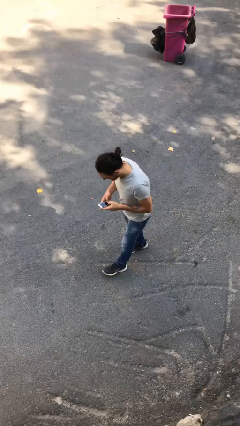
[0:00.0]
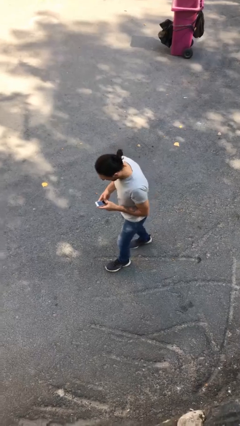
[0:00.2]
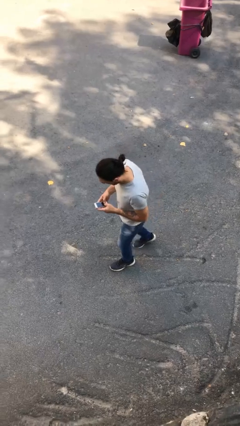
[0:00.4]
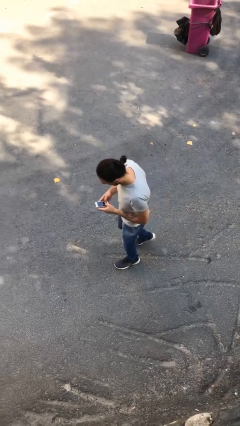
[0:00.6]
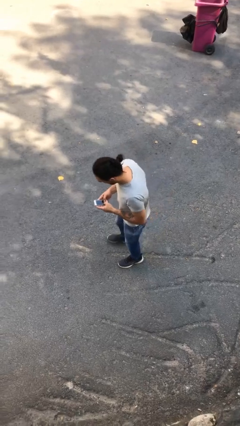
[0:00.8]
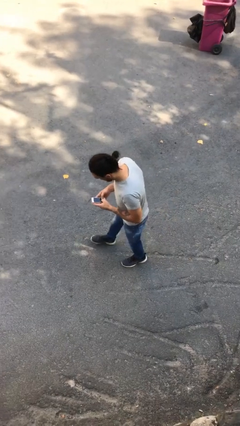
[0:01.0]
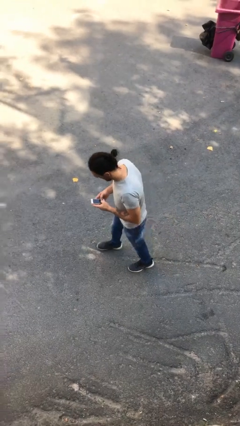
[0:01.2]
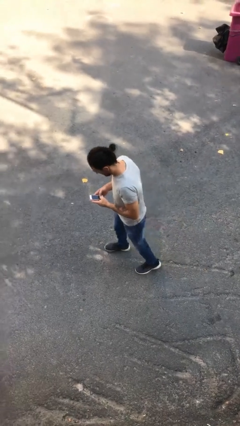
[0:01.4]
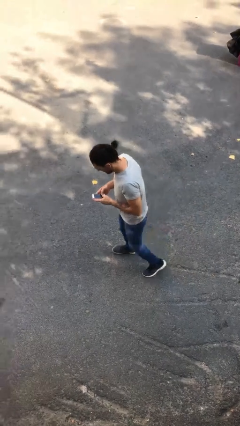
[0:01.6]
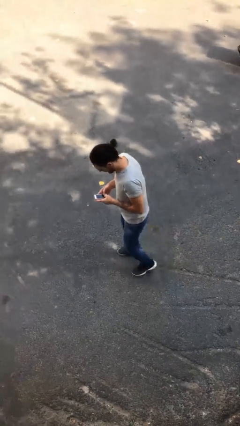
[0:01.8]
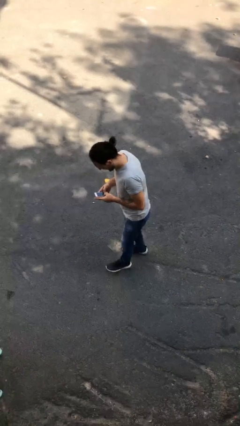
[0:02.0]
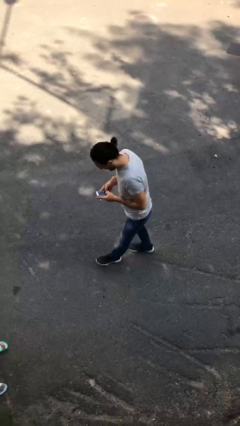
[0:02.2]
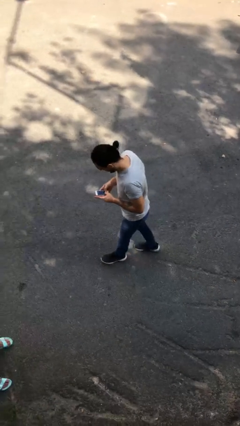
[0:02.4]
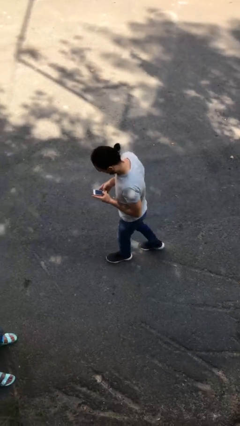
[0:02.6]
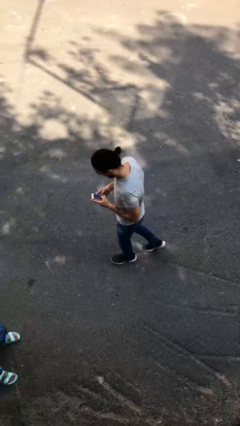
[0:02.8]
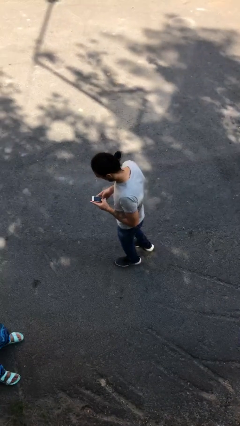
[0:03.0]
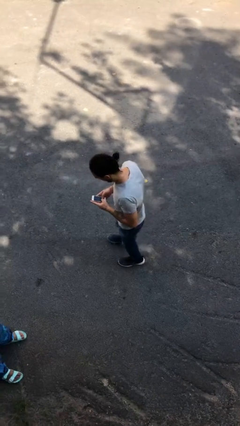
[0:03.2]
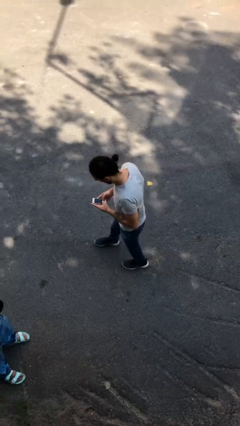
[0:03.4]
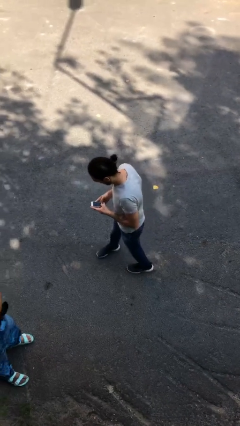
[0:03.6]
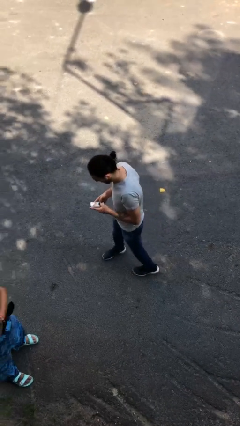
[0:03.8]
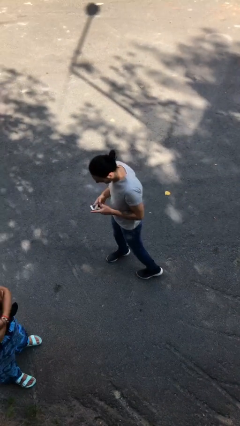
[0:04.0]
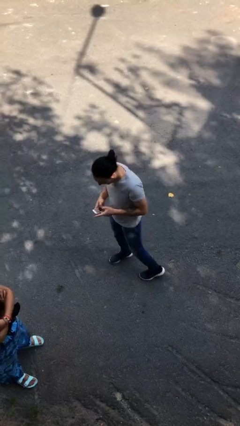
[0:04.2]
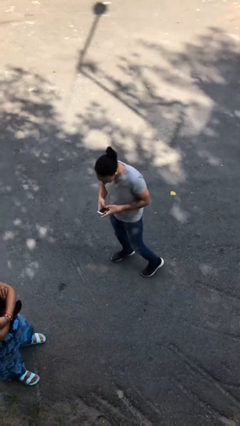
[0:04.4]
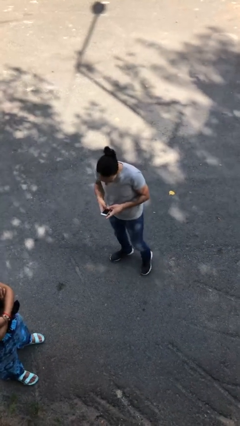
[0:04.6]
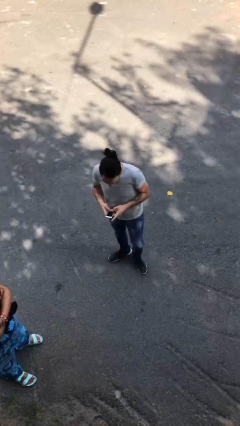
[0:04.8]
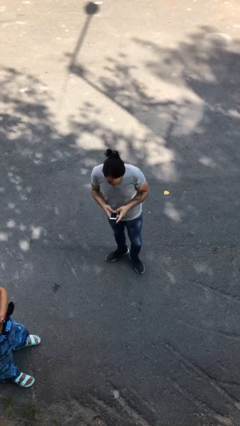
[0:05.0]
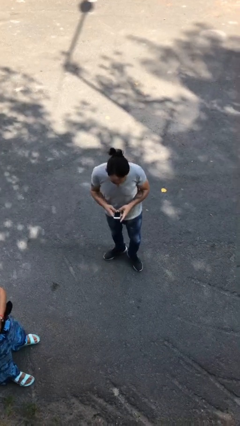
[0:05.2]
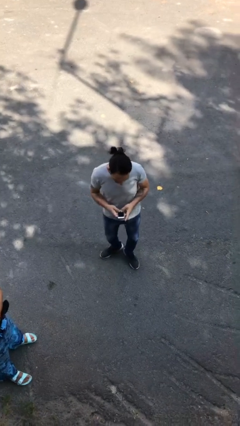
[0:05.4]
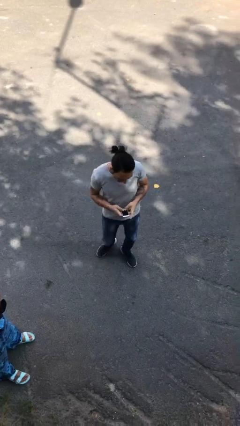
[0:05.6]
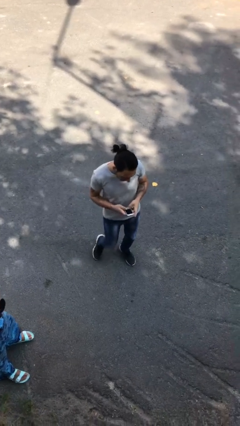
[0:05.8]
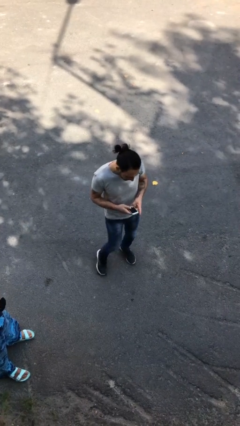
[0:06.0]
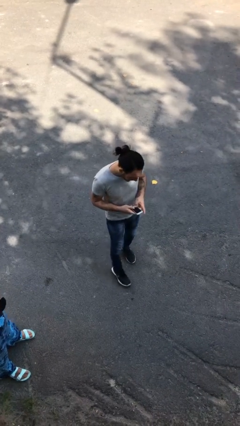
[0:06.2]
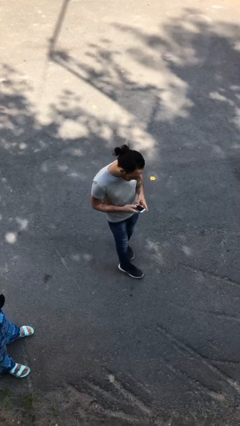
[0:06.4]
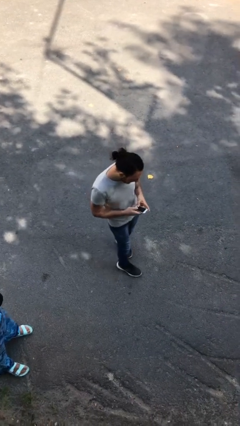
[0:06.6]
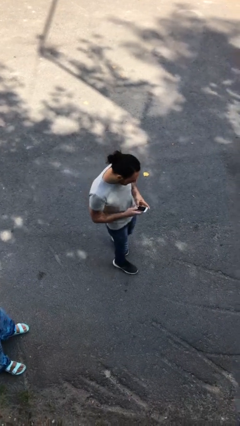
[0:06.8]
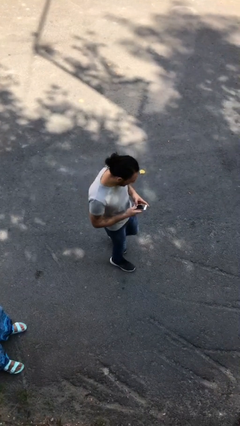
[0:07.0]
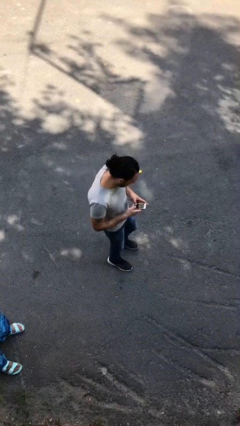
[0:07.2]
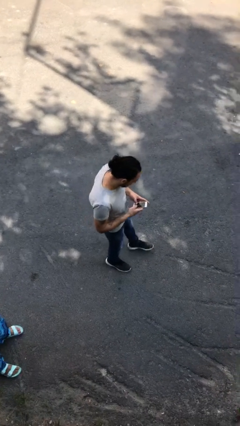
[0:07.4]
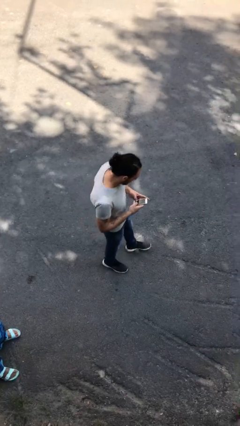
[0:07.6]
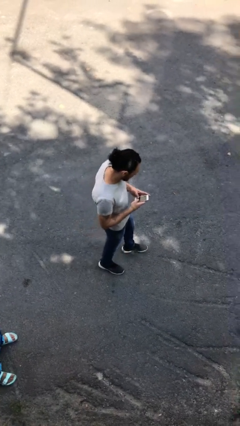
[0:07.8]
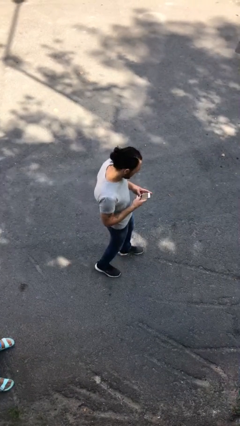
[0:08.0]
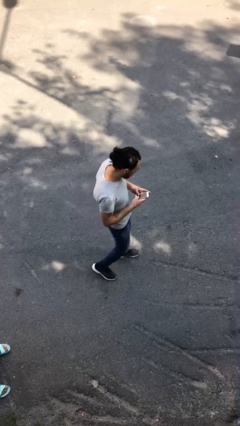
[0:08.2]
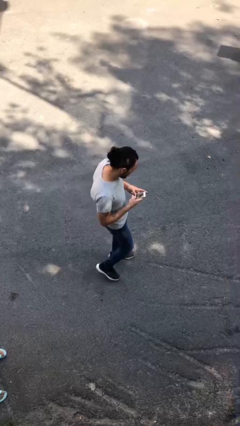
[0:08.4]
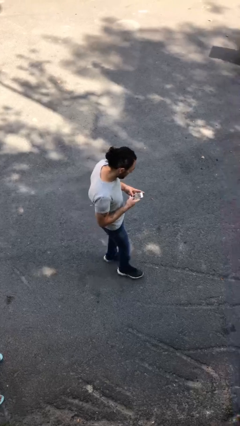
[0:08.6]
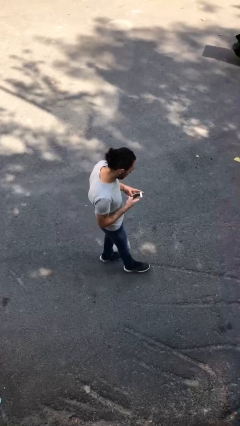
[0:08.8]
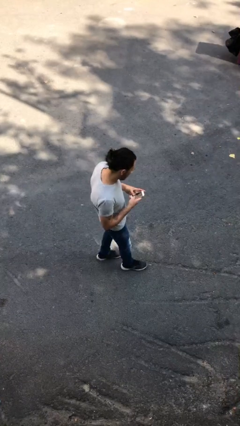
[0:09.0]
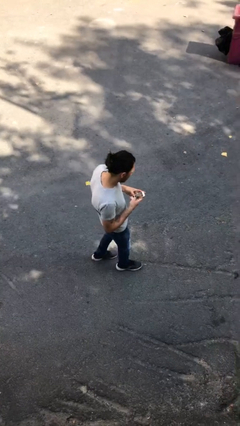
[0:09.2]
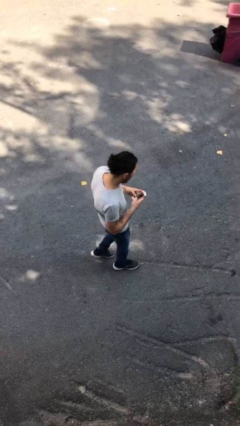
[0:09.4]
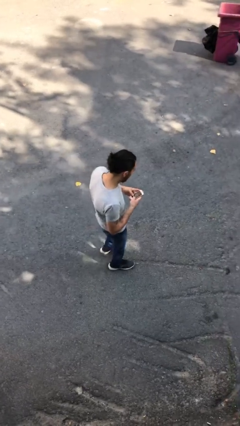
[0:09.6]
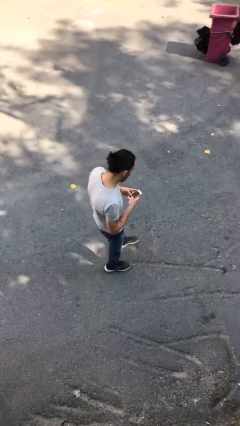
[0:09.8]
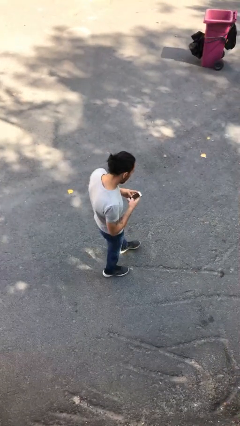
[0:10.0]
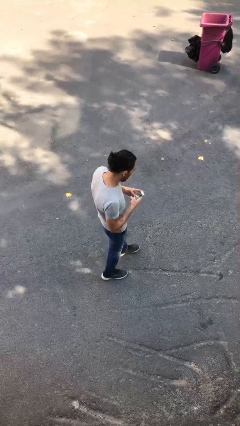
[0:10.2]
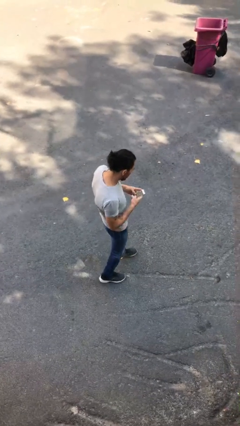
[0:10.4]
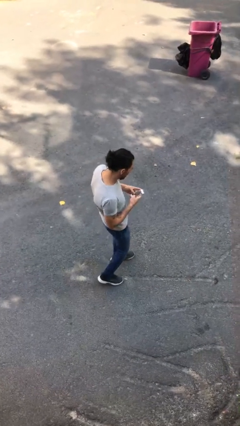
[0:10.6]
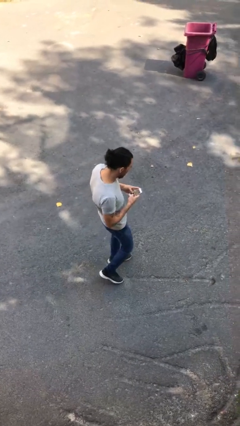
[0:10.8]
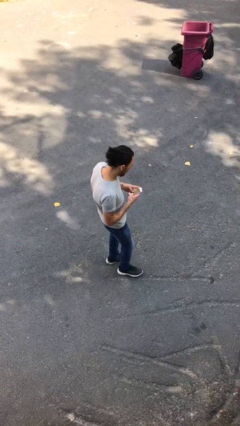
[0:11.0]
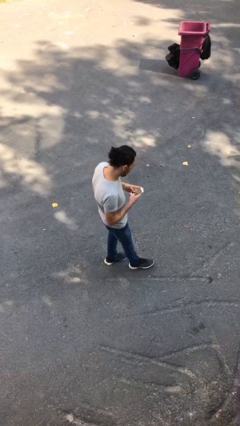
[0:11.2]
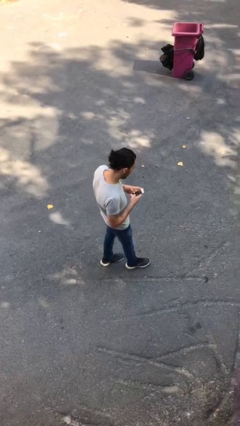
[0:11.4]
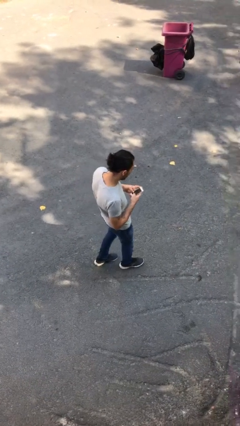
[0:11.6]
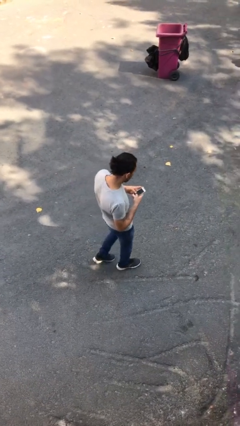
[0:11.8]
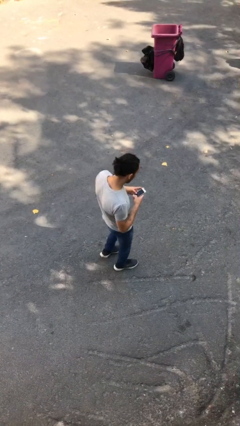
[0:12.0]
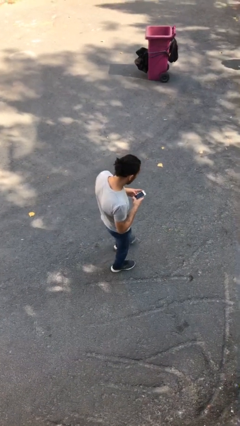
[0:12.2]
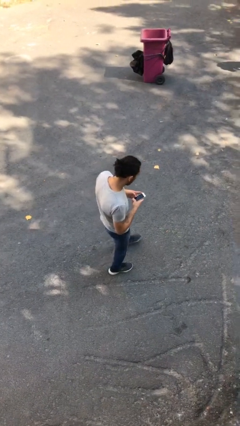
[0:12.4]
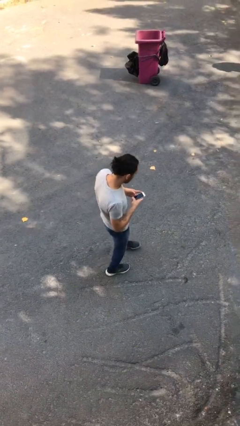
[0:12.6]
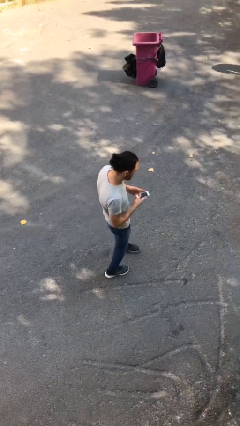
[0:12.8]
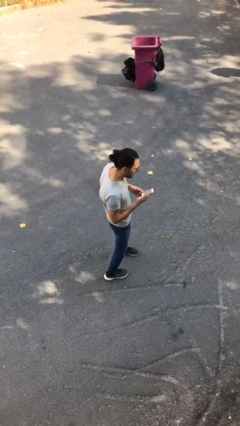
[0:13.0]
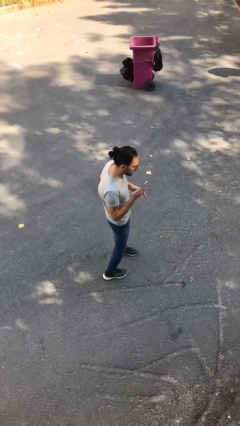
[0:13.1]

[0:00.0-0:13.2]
person texts on phone

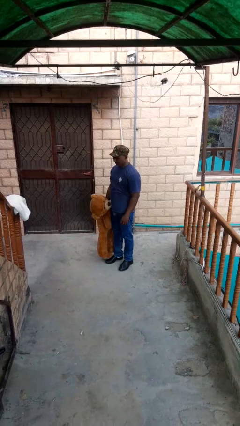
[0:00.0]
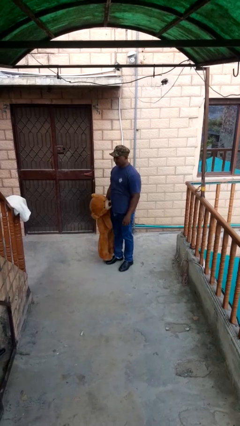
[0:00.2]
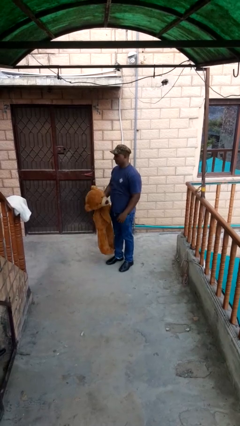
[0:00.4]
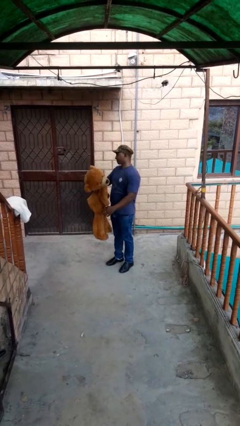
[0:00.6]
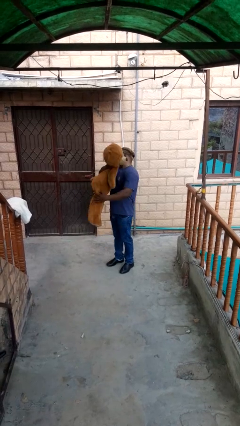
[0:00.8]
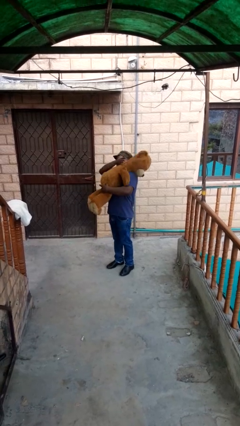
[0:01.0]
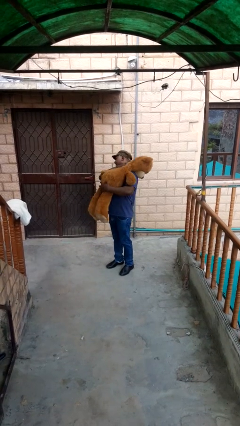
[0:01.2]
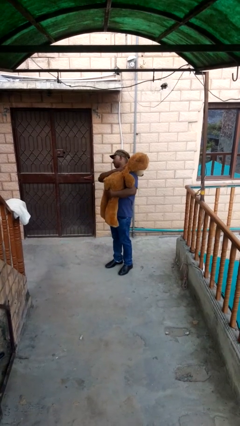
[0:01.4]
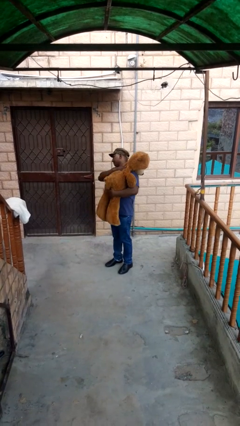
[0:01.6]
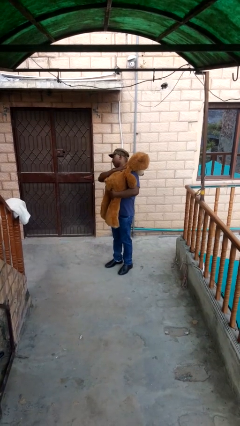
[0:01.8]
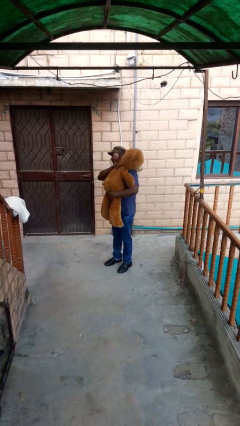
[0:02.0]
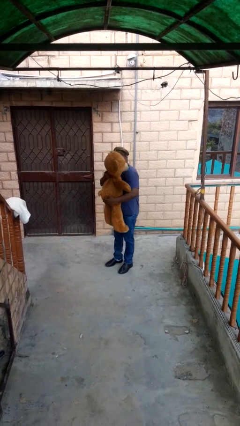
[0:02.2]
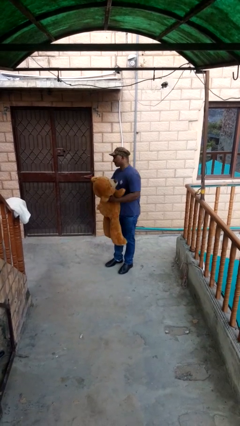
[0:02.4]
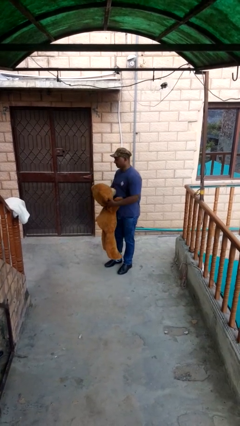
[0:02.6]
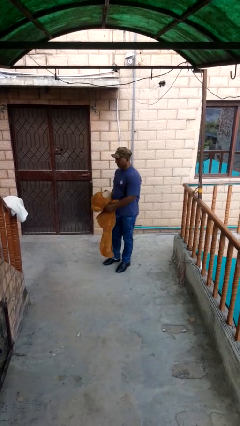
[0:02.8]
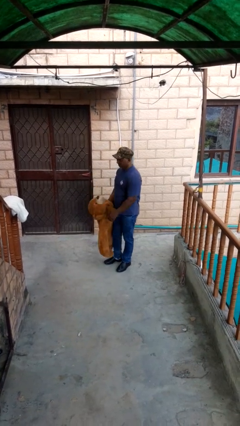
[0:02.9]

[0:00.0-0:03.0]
person hugs stuffed animal

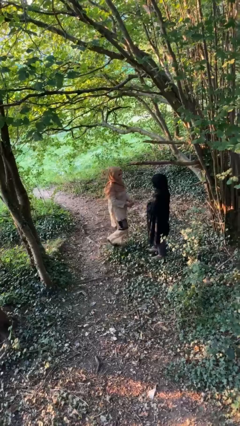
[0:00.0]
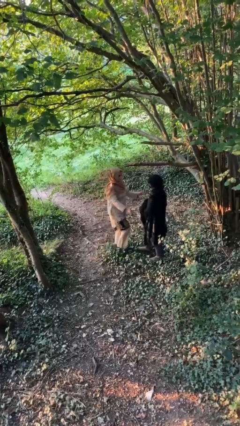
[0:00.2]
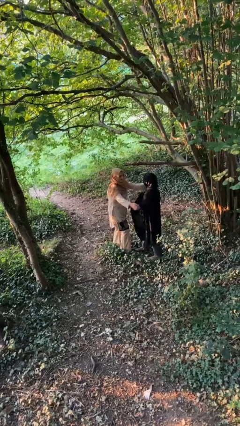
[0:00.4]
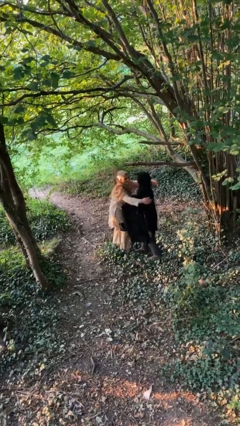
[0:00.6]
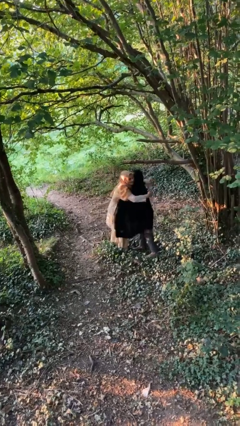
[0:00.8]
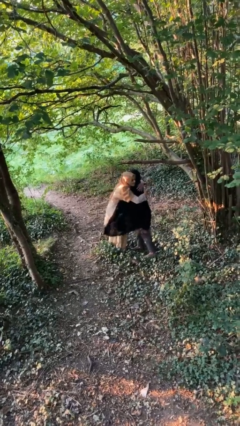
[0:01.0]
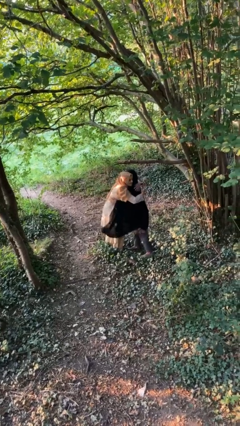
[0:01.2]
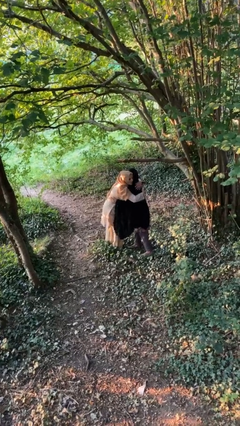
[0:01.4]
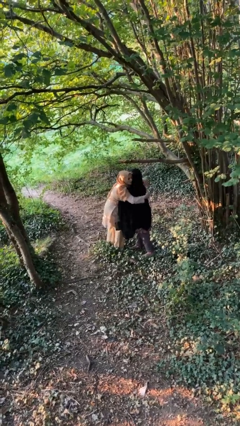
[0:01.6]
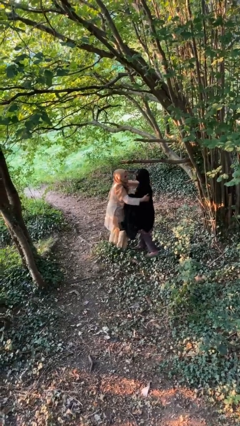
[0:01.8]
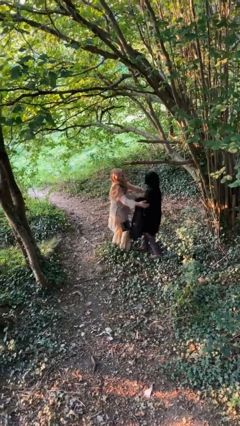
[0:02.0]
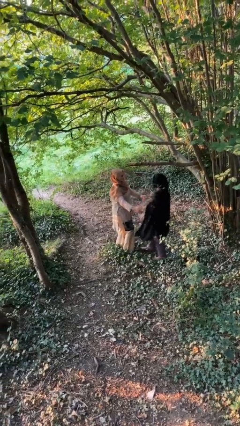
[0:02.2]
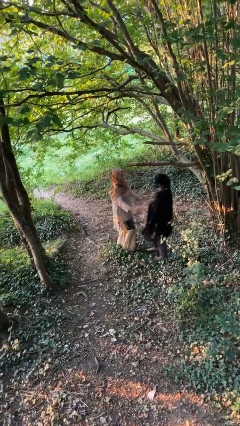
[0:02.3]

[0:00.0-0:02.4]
person embraces person
